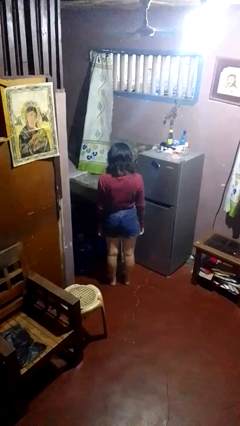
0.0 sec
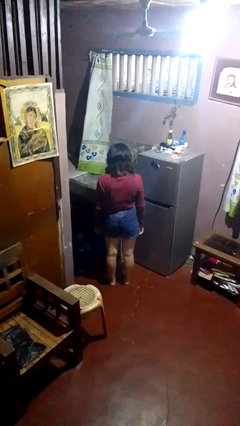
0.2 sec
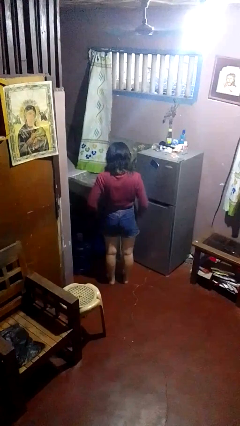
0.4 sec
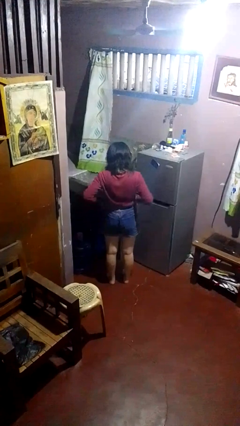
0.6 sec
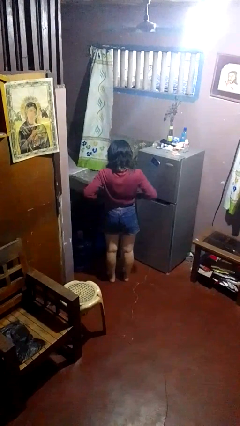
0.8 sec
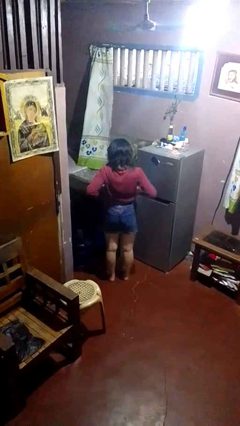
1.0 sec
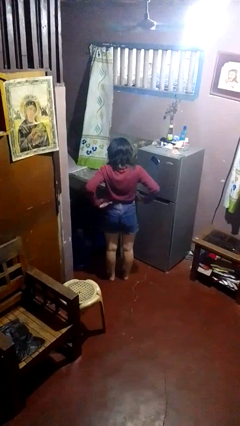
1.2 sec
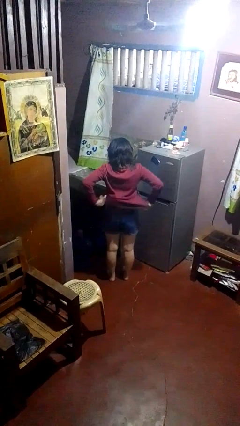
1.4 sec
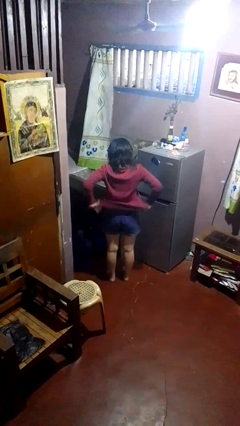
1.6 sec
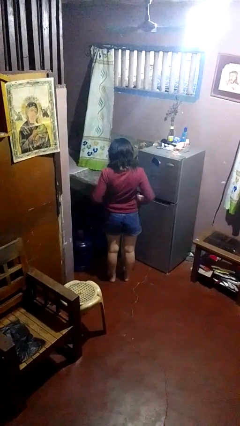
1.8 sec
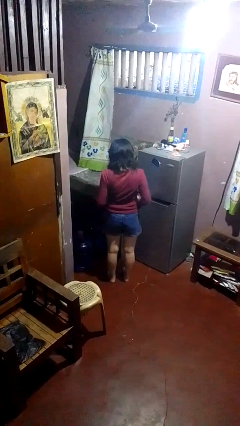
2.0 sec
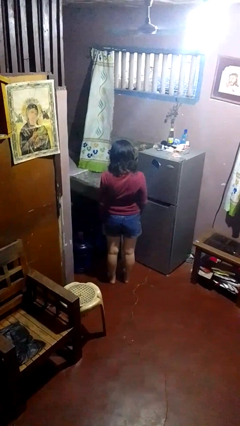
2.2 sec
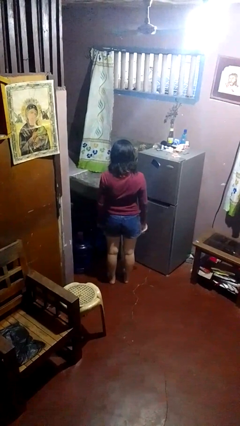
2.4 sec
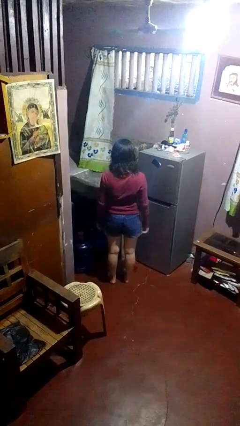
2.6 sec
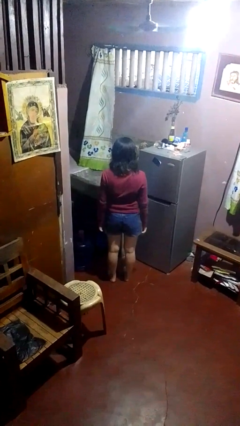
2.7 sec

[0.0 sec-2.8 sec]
person untucks shirt

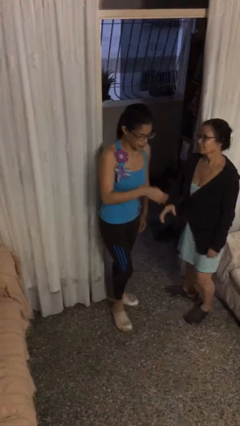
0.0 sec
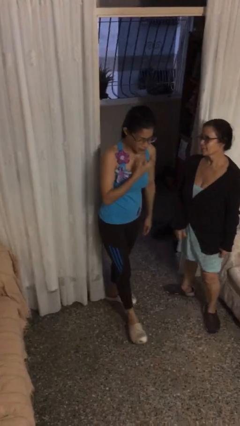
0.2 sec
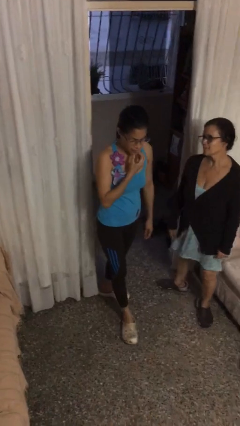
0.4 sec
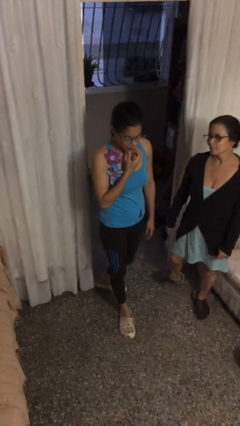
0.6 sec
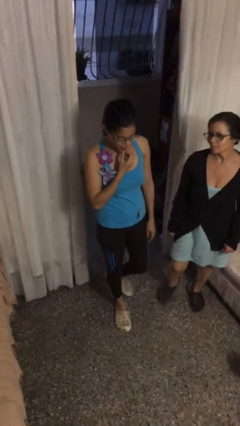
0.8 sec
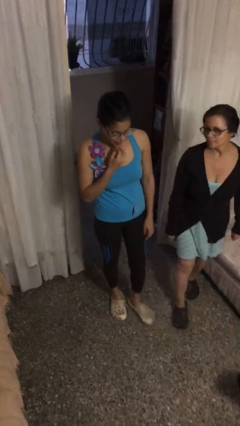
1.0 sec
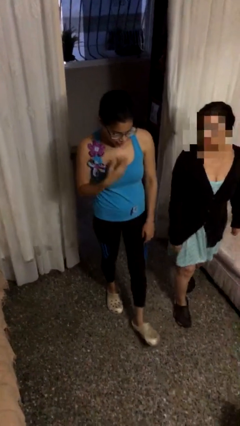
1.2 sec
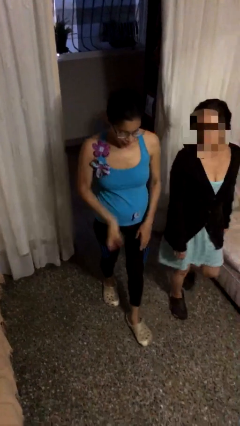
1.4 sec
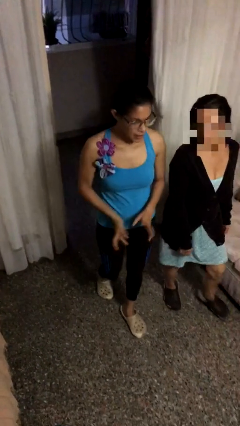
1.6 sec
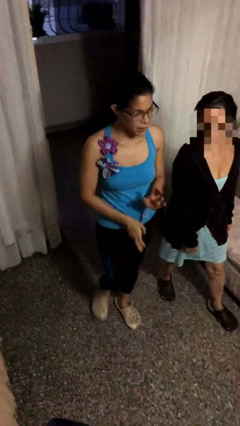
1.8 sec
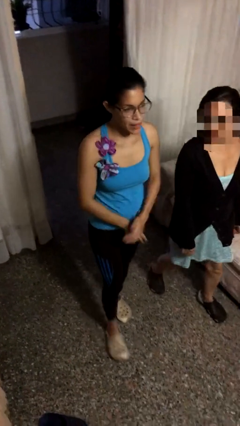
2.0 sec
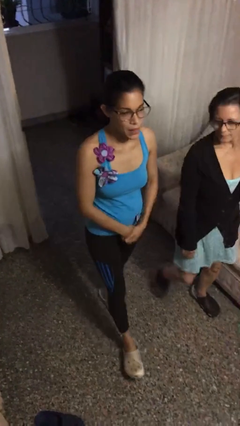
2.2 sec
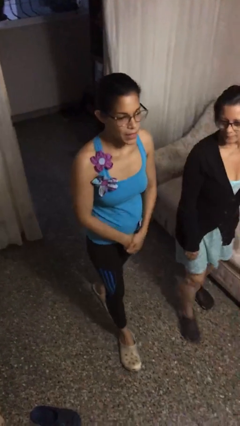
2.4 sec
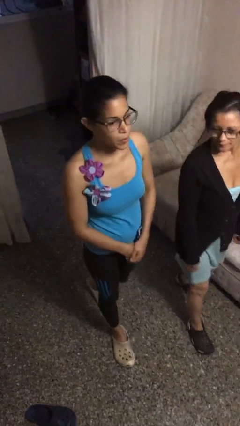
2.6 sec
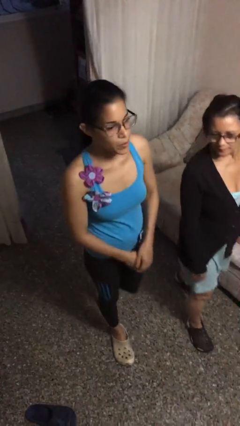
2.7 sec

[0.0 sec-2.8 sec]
person talks to person

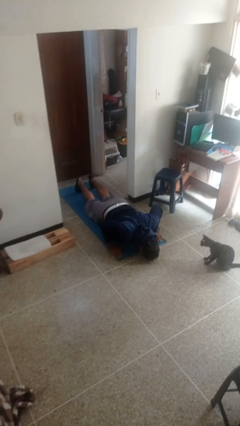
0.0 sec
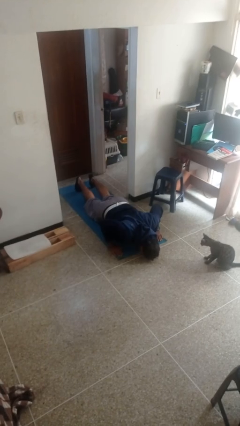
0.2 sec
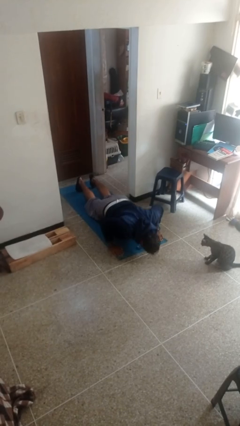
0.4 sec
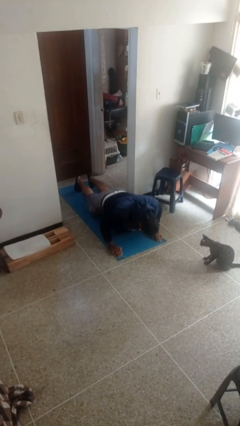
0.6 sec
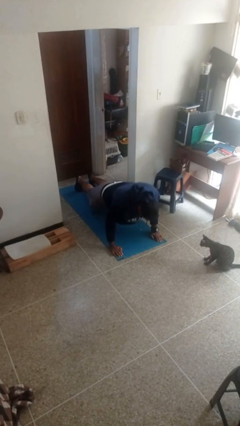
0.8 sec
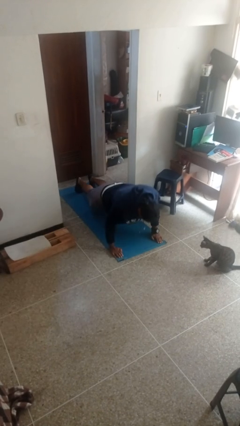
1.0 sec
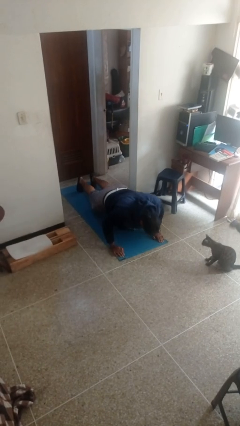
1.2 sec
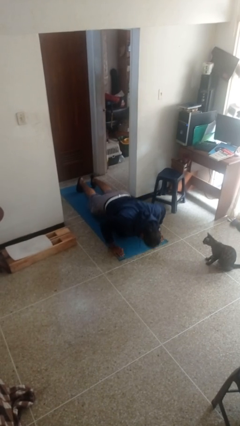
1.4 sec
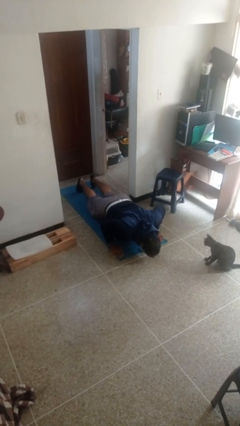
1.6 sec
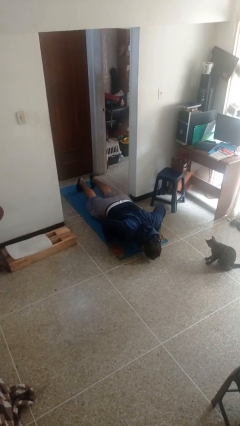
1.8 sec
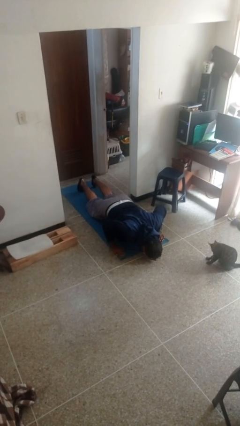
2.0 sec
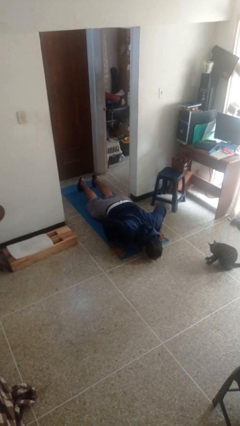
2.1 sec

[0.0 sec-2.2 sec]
person exercises with pushup

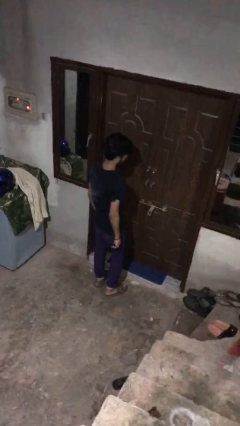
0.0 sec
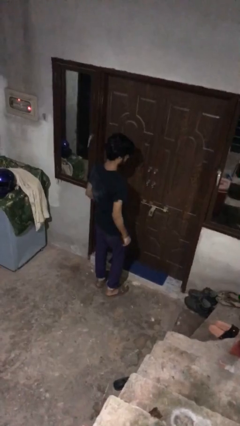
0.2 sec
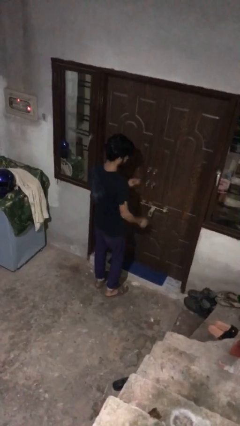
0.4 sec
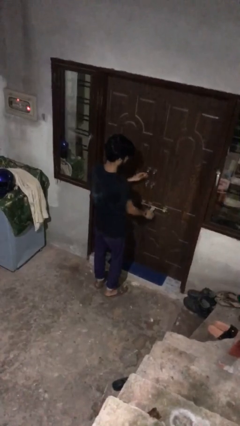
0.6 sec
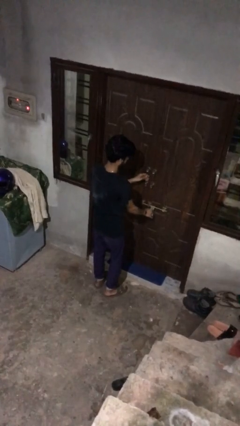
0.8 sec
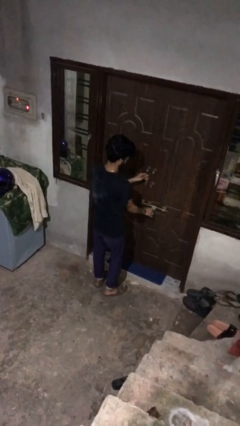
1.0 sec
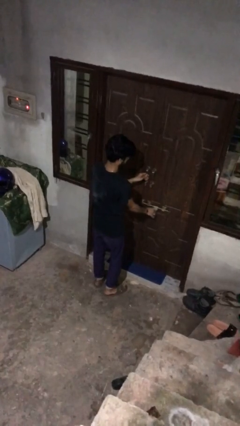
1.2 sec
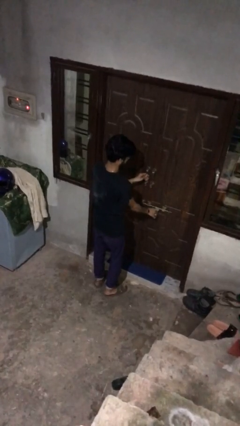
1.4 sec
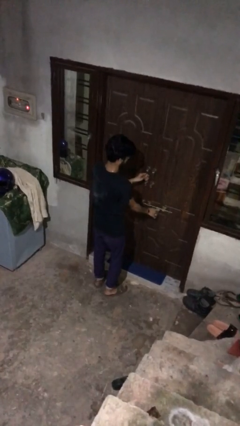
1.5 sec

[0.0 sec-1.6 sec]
person unlocks door with keys

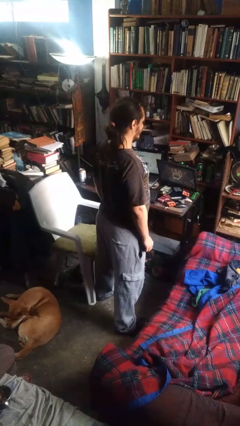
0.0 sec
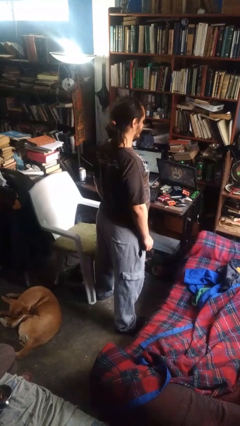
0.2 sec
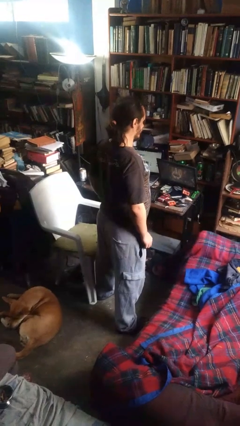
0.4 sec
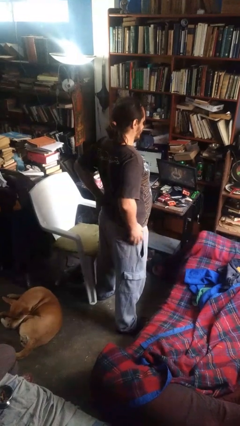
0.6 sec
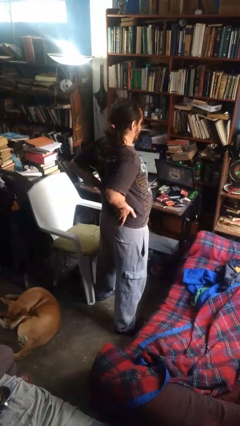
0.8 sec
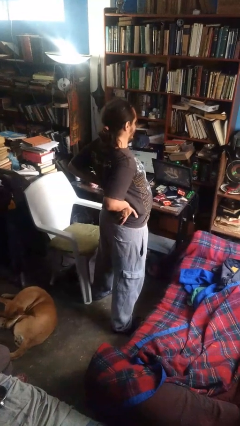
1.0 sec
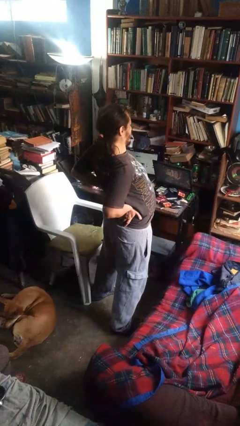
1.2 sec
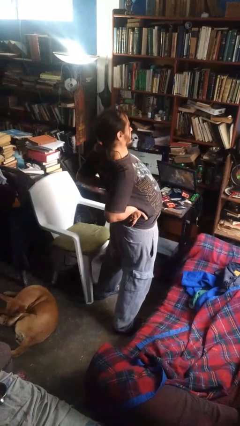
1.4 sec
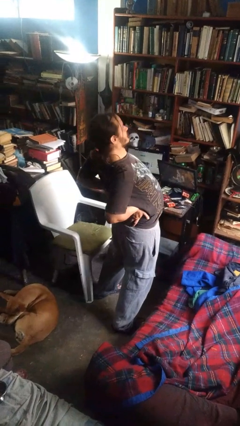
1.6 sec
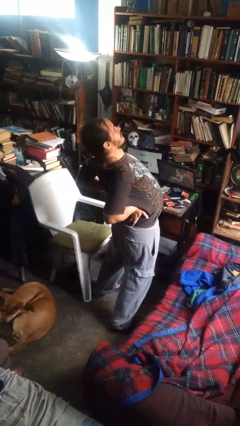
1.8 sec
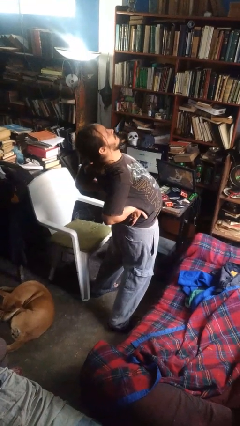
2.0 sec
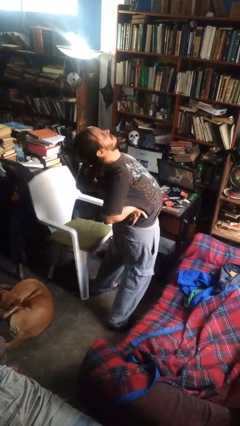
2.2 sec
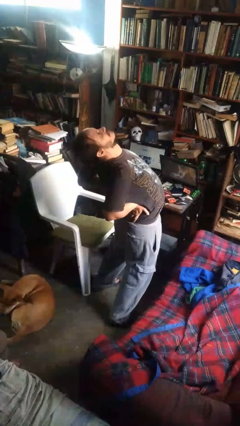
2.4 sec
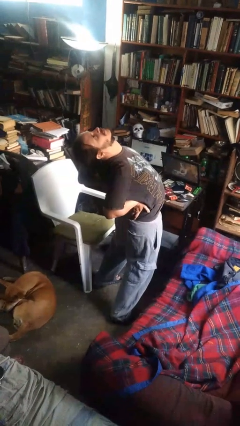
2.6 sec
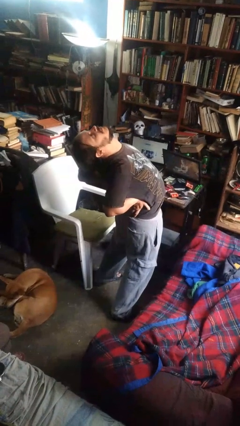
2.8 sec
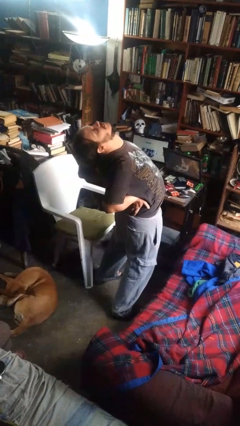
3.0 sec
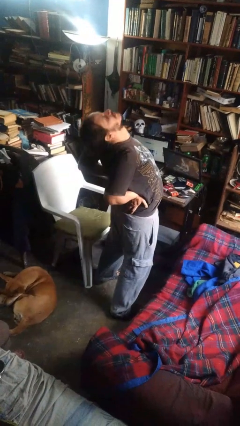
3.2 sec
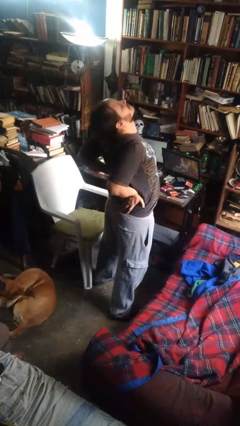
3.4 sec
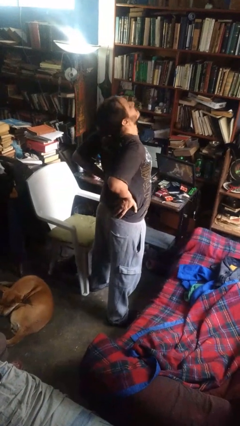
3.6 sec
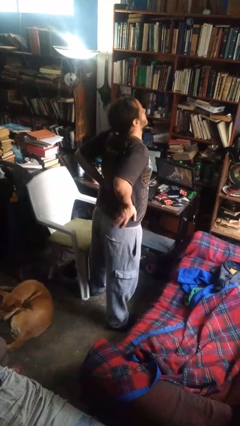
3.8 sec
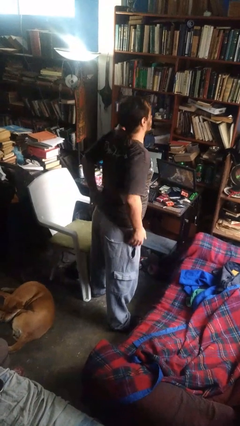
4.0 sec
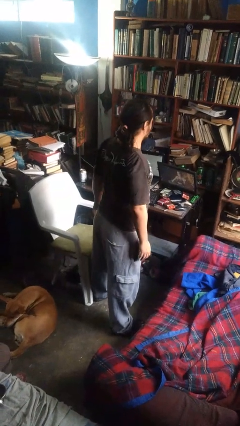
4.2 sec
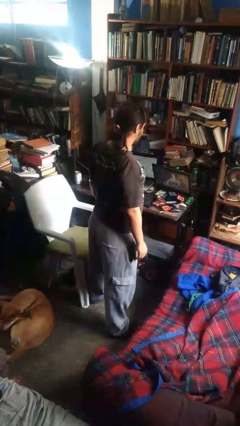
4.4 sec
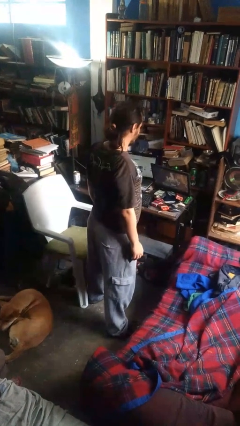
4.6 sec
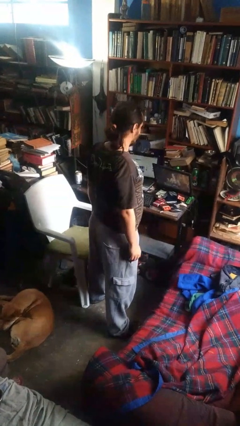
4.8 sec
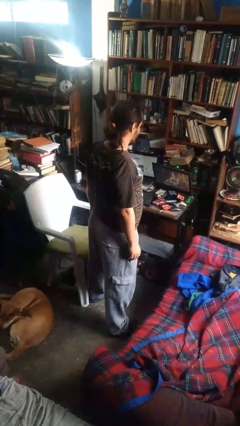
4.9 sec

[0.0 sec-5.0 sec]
person stretches back

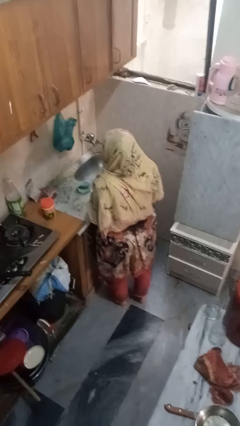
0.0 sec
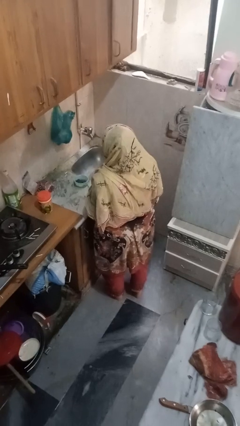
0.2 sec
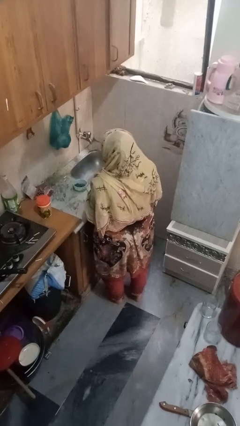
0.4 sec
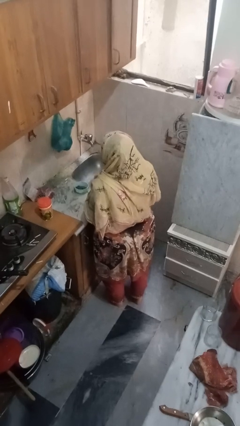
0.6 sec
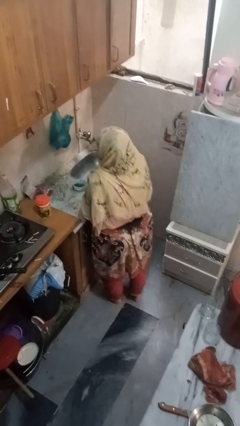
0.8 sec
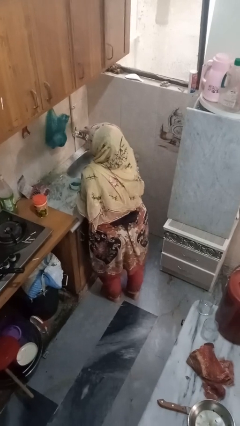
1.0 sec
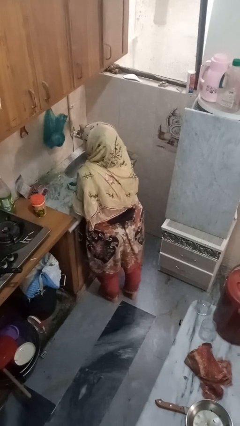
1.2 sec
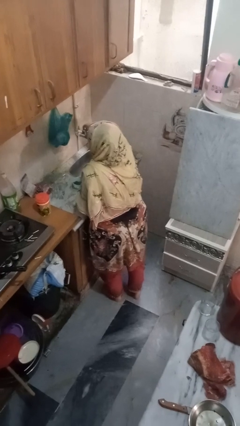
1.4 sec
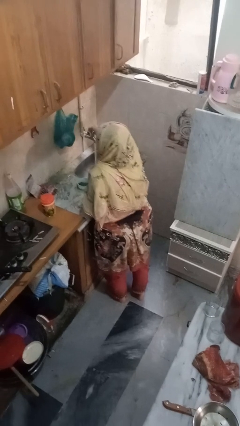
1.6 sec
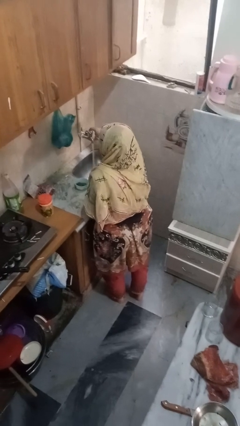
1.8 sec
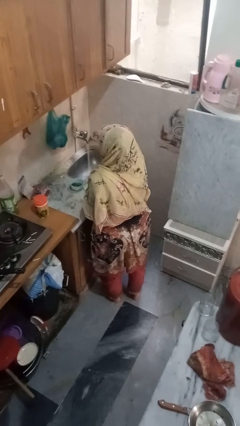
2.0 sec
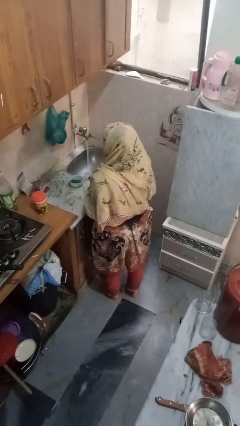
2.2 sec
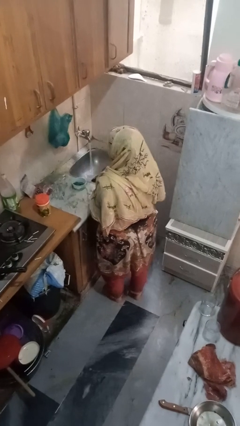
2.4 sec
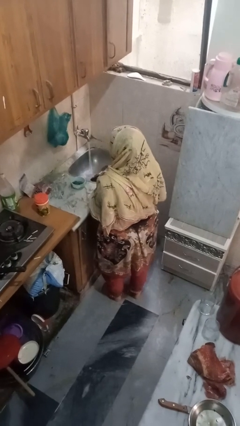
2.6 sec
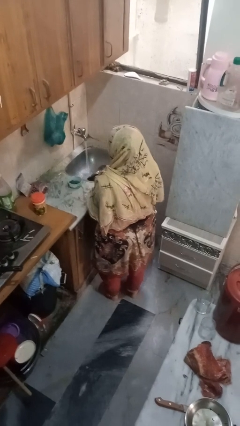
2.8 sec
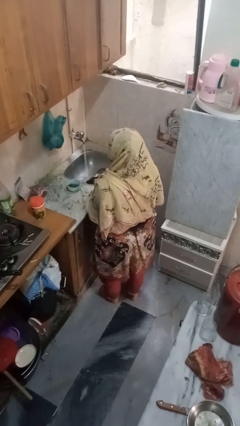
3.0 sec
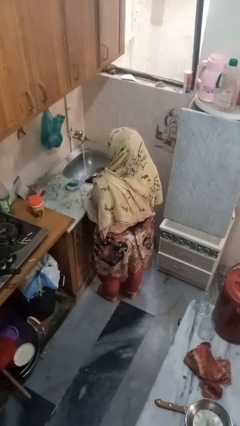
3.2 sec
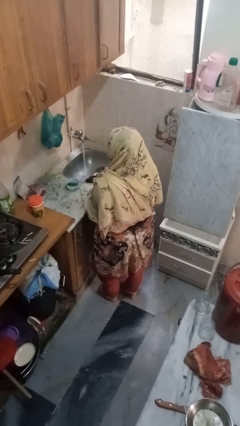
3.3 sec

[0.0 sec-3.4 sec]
person turns on faucet
